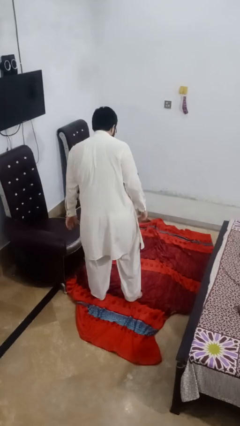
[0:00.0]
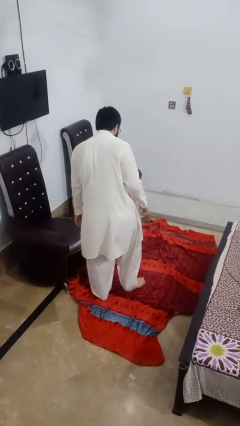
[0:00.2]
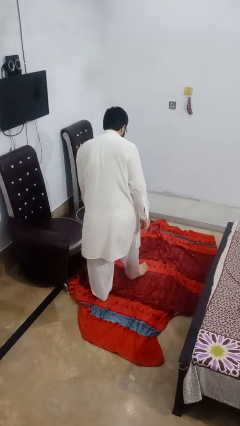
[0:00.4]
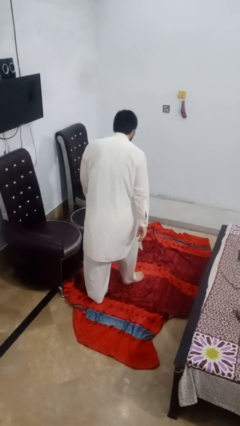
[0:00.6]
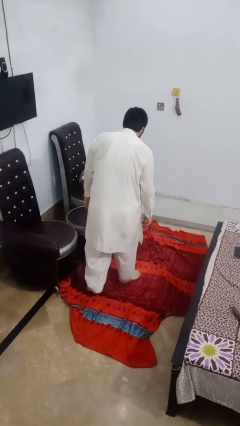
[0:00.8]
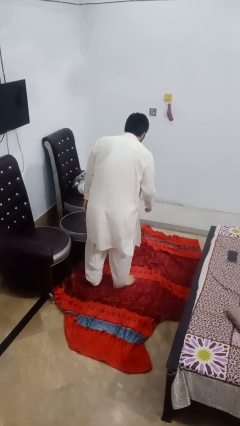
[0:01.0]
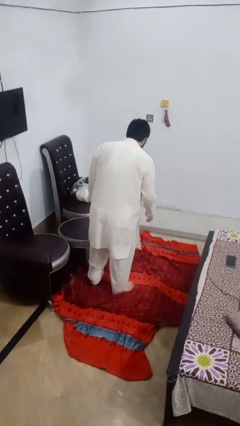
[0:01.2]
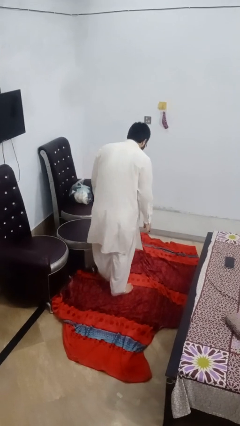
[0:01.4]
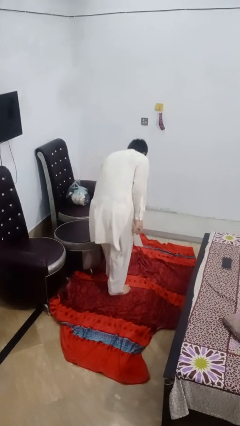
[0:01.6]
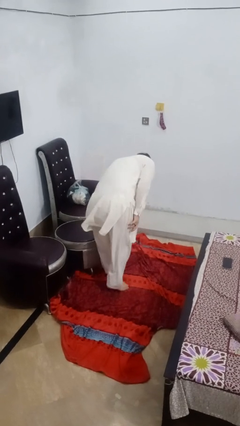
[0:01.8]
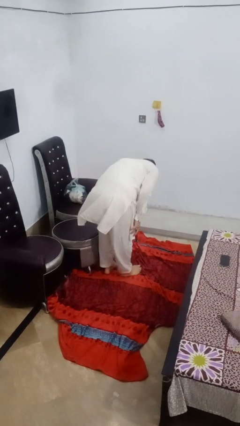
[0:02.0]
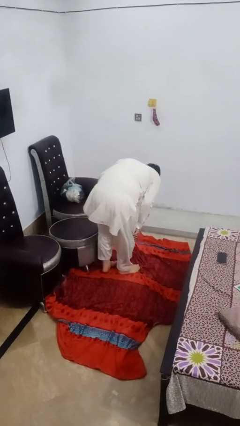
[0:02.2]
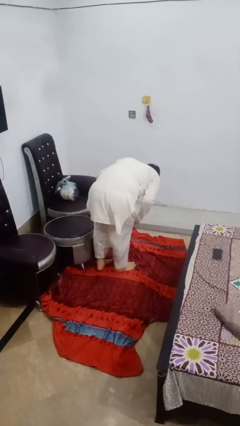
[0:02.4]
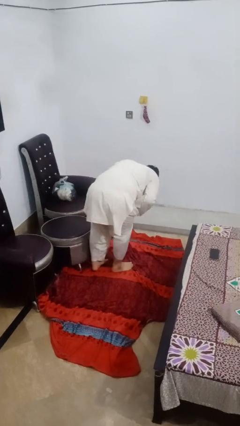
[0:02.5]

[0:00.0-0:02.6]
person trips on object on floor

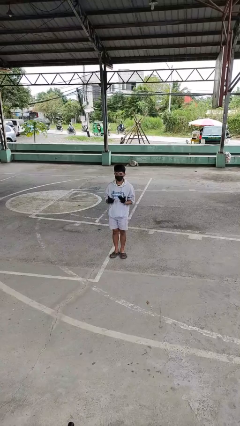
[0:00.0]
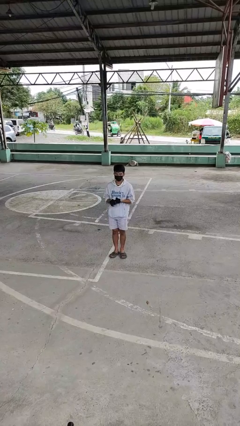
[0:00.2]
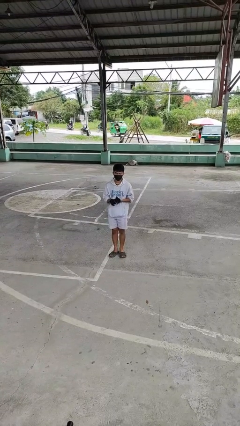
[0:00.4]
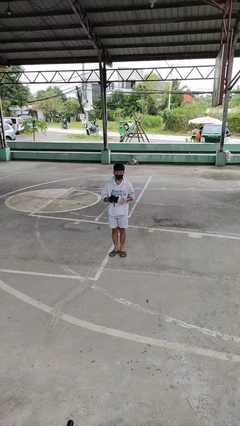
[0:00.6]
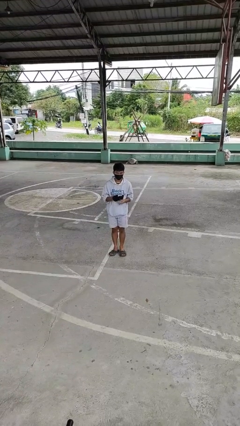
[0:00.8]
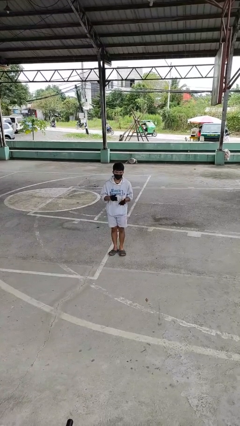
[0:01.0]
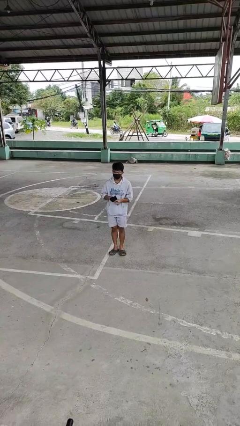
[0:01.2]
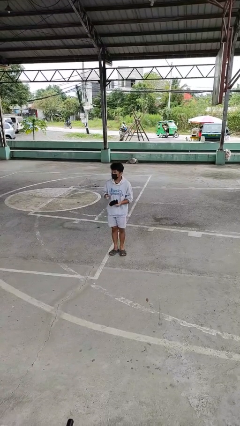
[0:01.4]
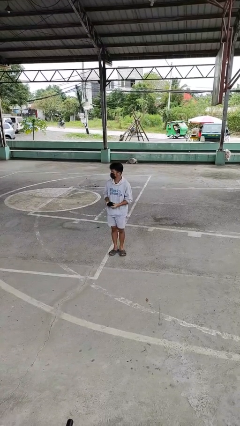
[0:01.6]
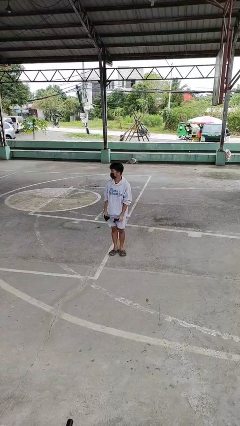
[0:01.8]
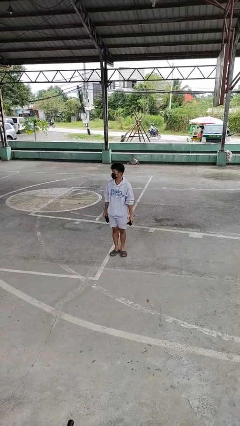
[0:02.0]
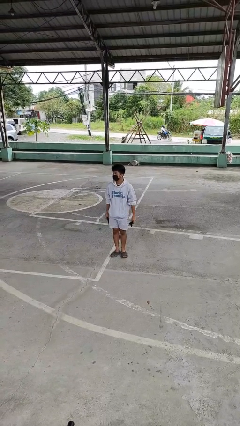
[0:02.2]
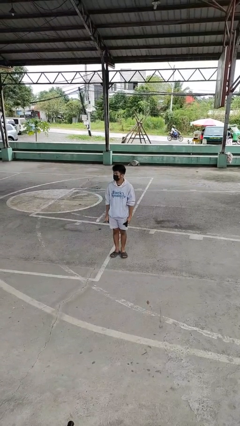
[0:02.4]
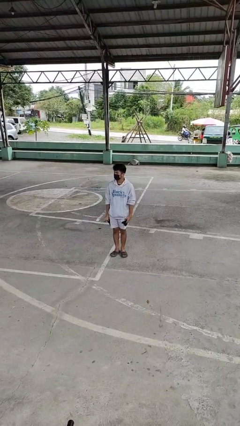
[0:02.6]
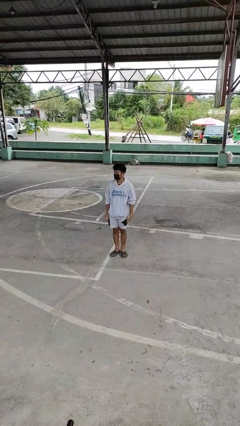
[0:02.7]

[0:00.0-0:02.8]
person takes off gloves

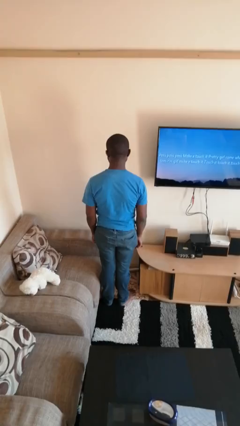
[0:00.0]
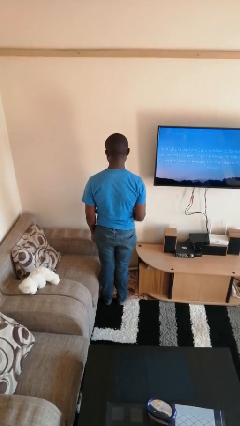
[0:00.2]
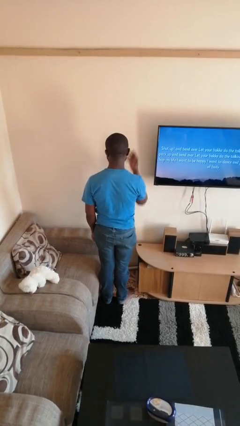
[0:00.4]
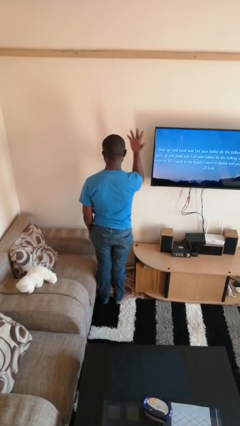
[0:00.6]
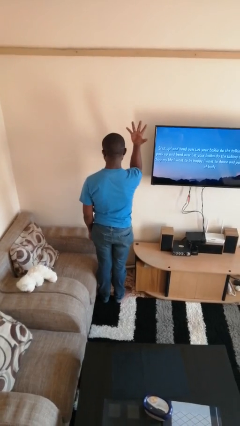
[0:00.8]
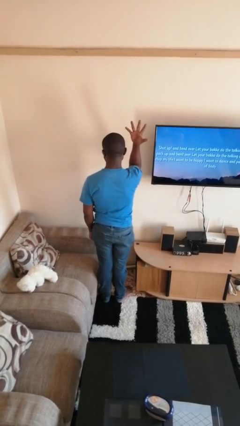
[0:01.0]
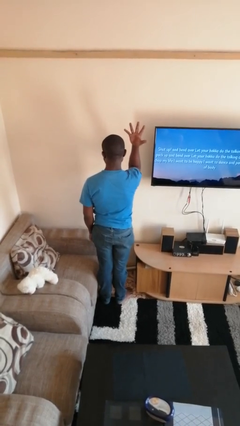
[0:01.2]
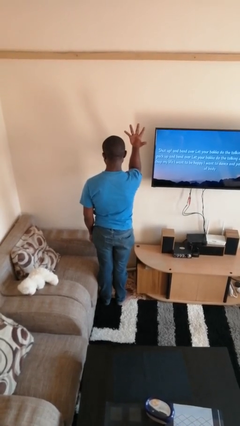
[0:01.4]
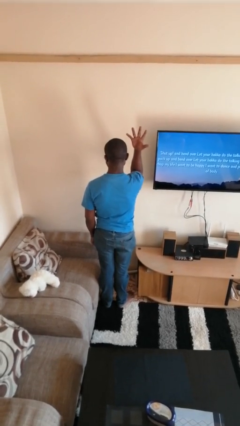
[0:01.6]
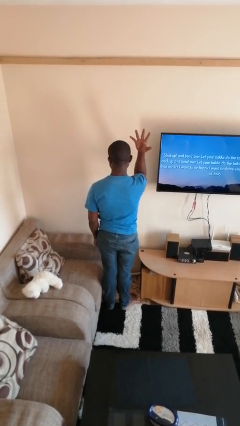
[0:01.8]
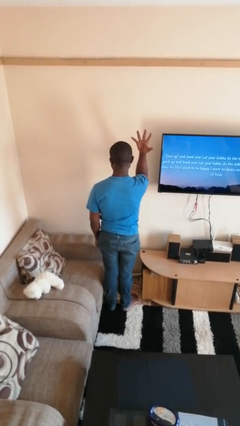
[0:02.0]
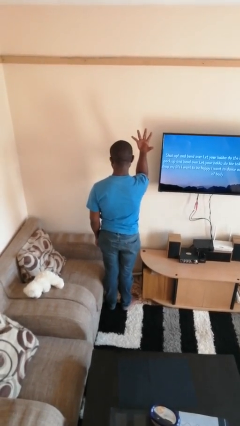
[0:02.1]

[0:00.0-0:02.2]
person gestures number five

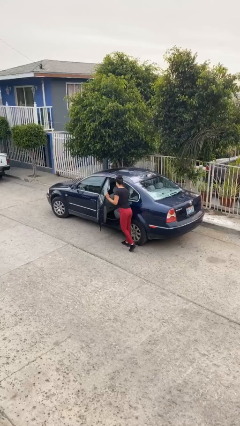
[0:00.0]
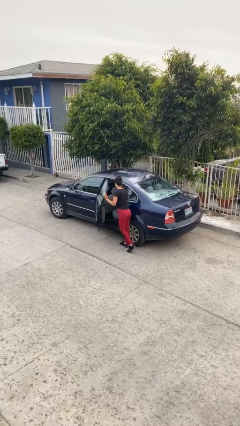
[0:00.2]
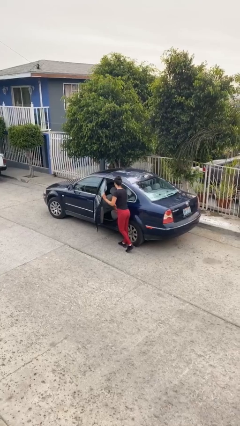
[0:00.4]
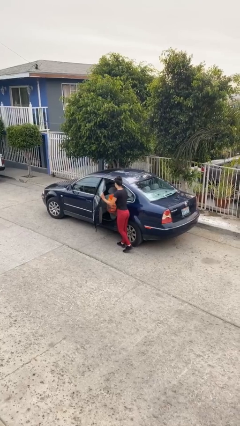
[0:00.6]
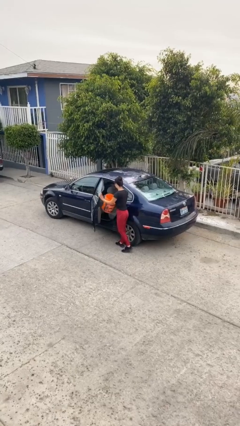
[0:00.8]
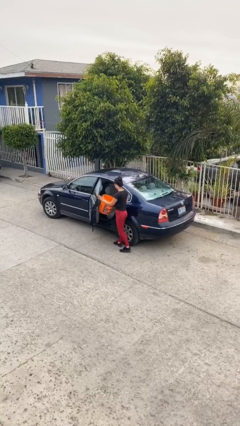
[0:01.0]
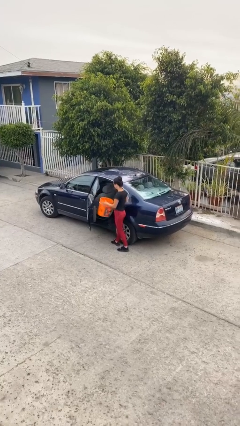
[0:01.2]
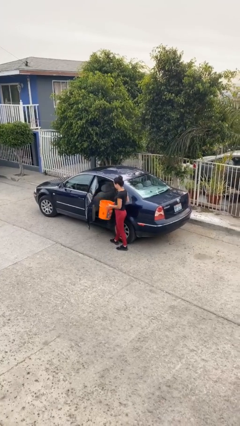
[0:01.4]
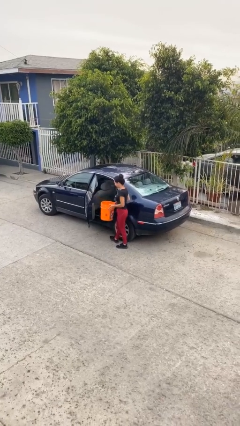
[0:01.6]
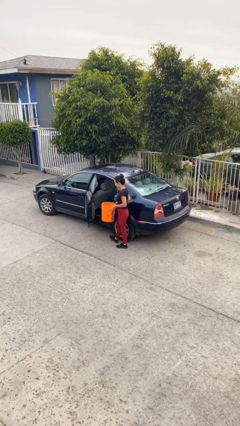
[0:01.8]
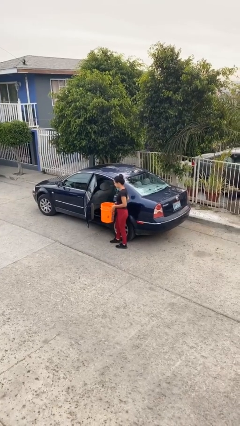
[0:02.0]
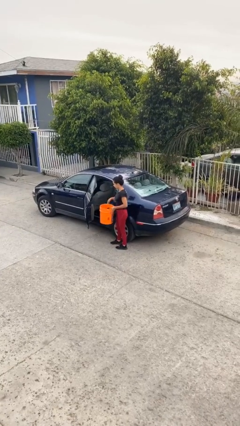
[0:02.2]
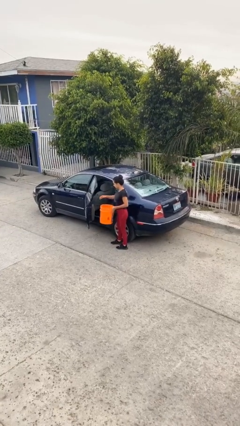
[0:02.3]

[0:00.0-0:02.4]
person unloads car

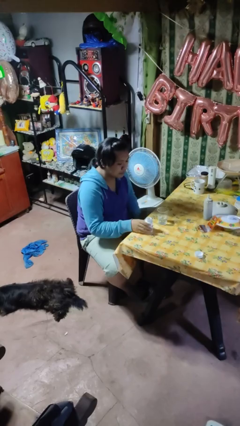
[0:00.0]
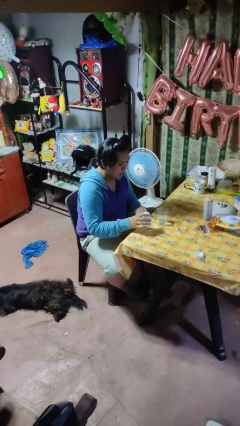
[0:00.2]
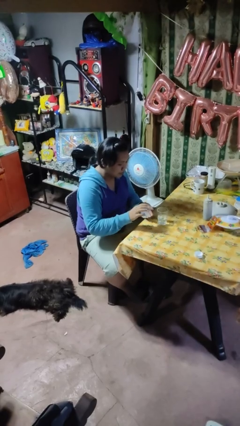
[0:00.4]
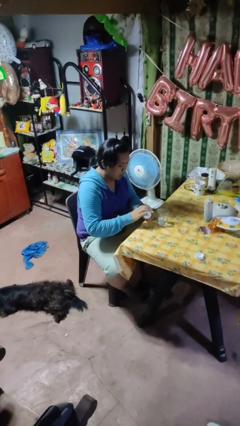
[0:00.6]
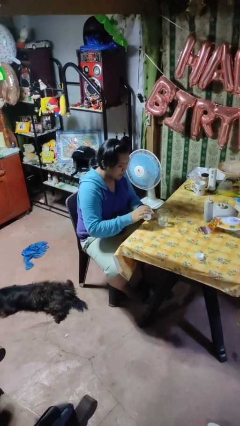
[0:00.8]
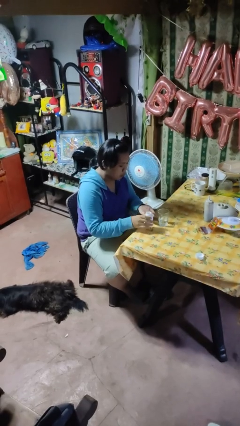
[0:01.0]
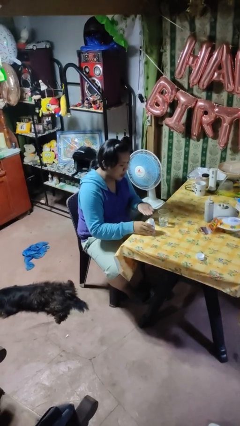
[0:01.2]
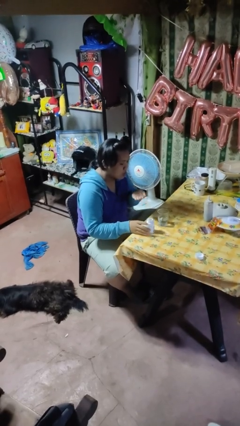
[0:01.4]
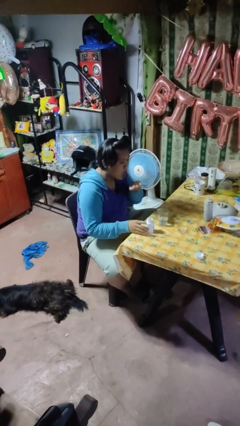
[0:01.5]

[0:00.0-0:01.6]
person takes medicine pills

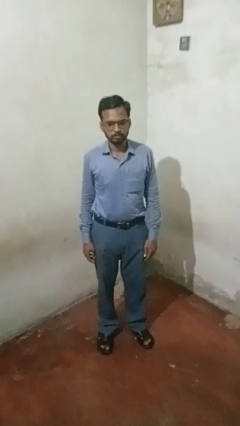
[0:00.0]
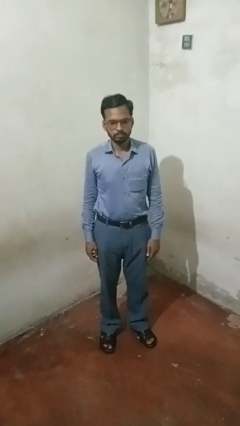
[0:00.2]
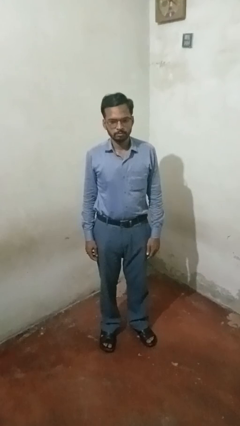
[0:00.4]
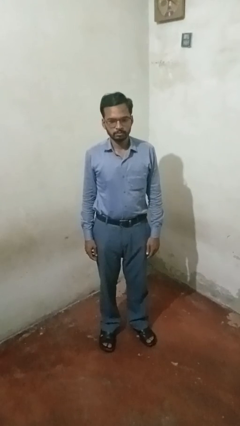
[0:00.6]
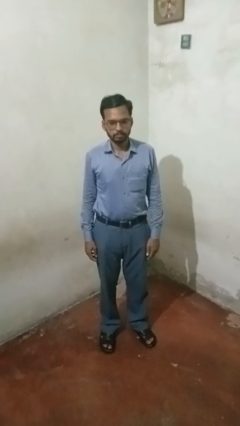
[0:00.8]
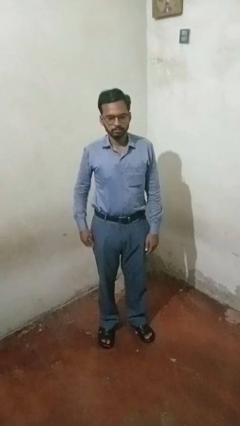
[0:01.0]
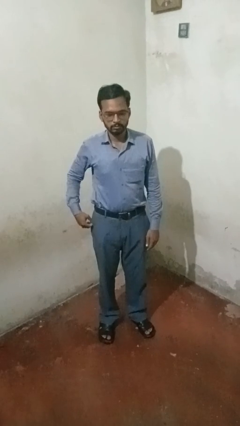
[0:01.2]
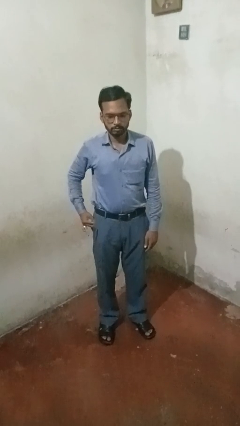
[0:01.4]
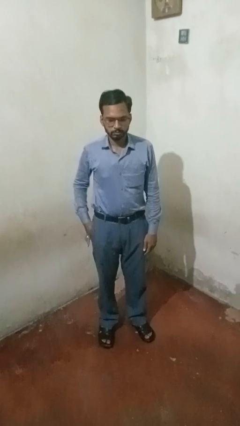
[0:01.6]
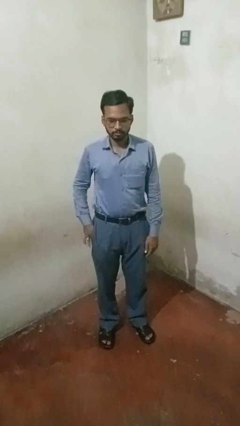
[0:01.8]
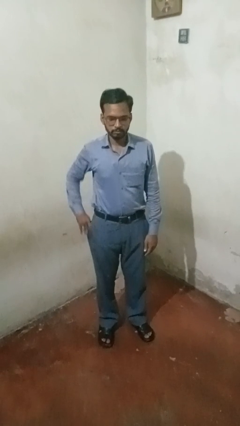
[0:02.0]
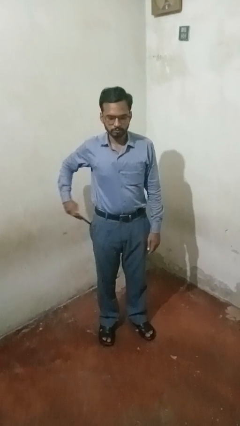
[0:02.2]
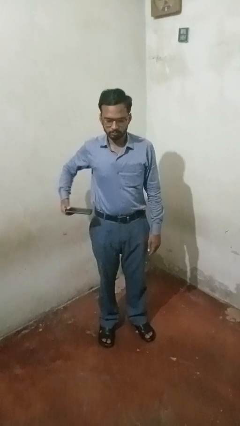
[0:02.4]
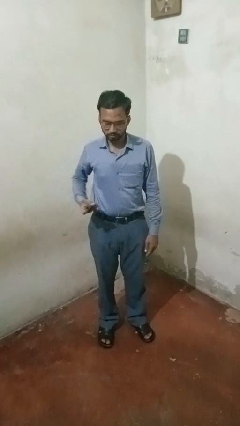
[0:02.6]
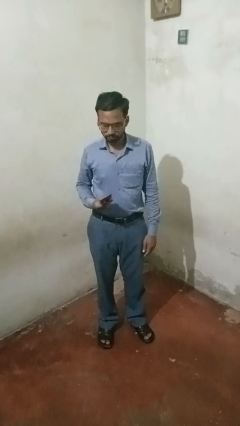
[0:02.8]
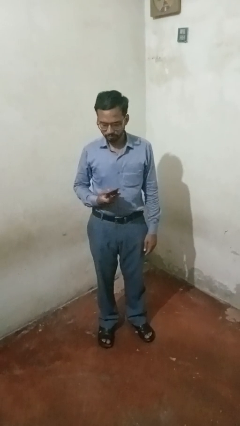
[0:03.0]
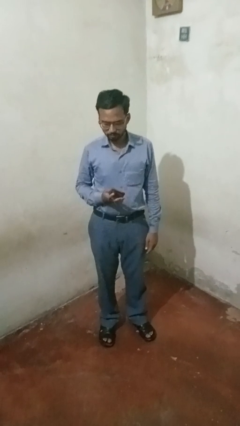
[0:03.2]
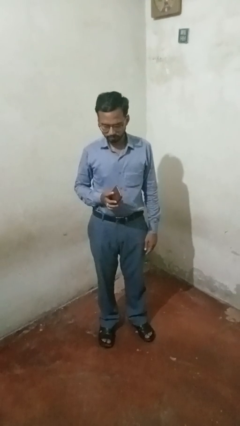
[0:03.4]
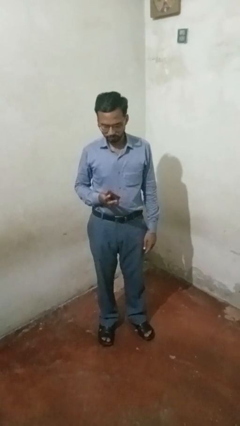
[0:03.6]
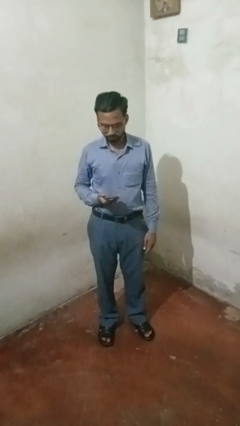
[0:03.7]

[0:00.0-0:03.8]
person takes phone from pocket

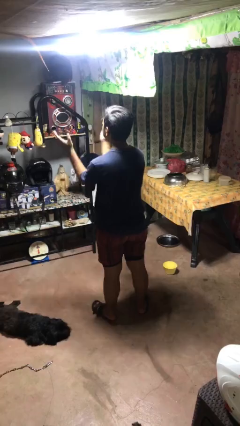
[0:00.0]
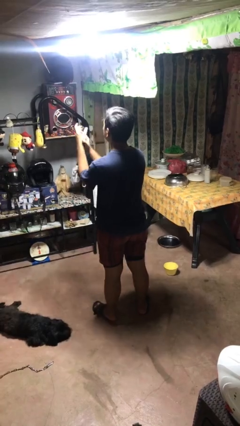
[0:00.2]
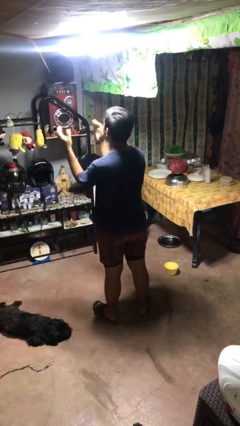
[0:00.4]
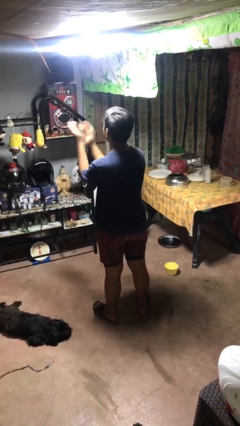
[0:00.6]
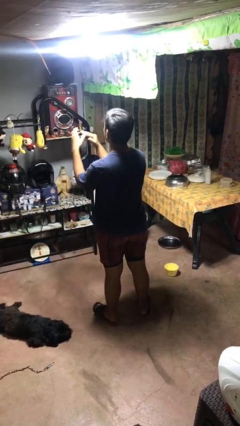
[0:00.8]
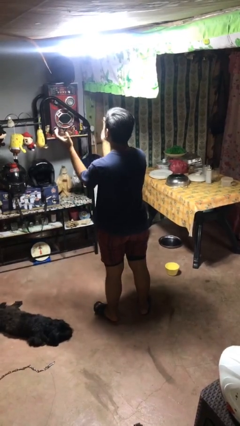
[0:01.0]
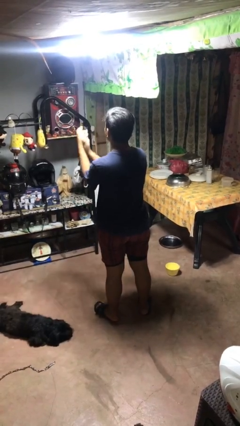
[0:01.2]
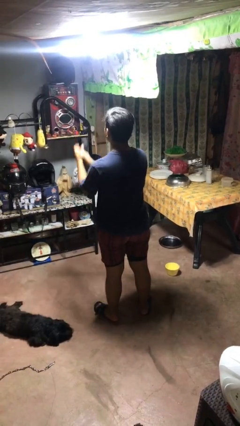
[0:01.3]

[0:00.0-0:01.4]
person claps hands

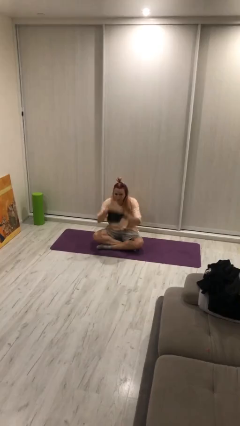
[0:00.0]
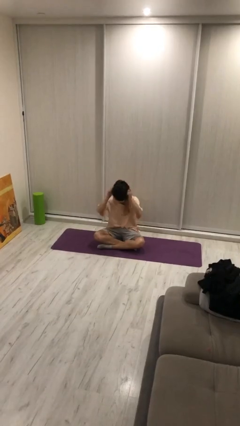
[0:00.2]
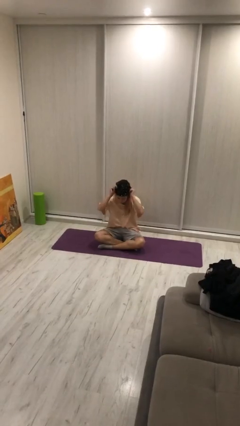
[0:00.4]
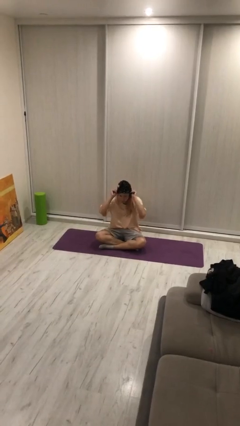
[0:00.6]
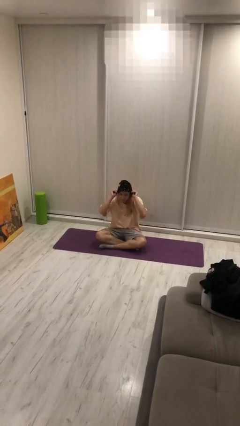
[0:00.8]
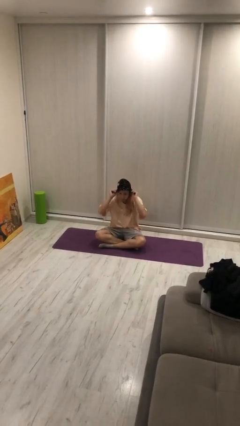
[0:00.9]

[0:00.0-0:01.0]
person puts on hat
